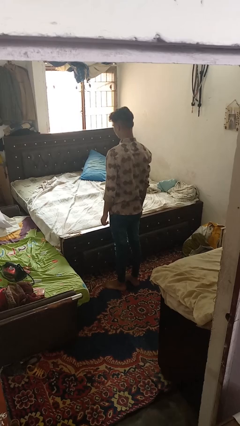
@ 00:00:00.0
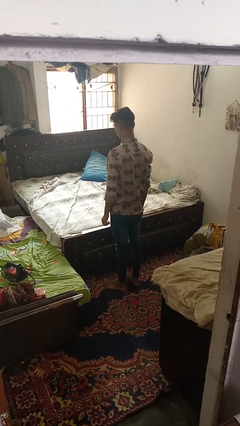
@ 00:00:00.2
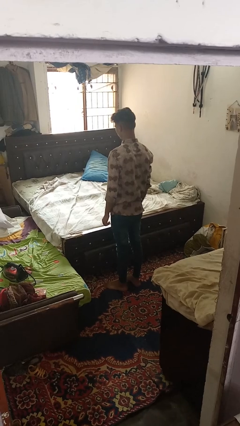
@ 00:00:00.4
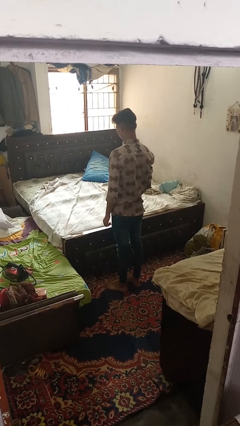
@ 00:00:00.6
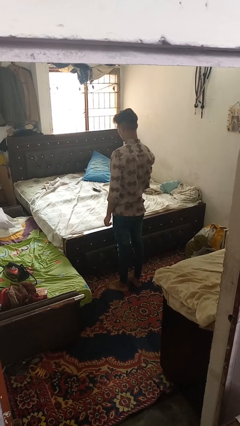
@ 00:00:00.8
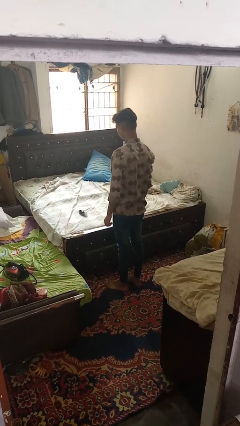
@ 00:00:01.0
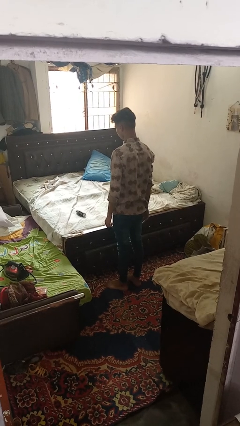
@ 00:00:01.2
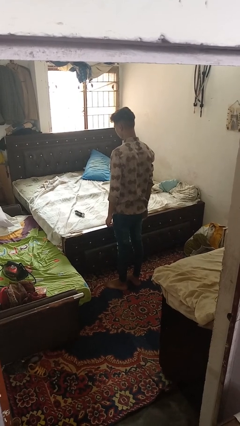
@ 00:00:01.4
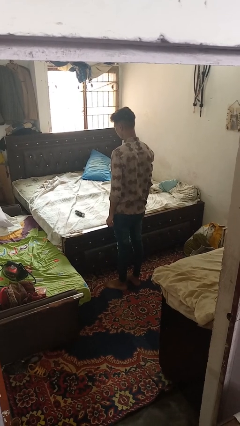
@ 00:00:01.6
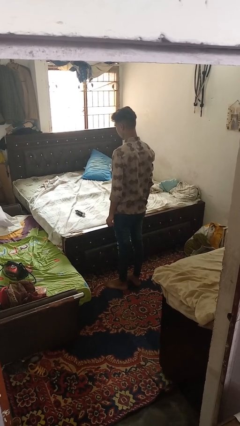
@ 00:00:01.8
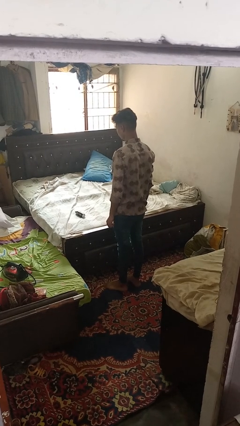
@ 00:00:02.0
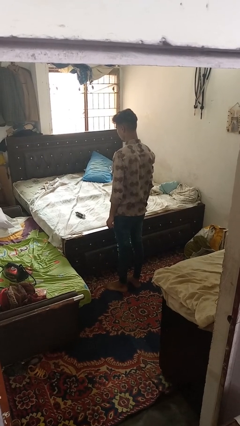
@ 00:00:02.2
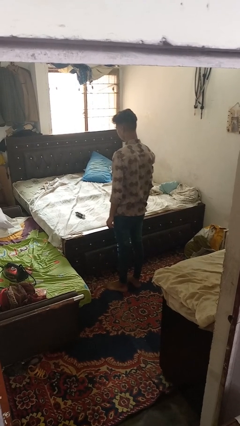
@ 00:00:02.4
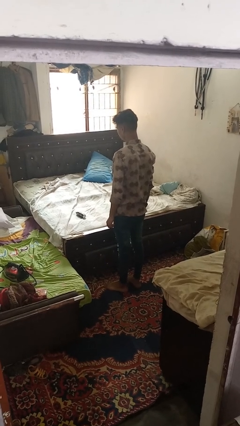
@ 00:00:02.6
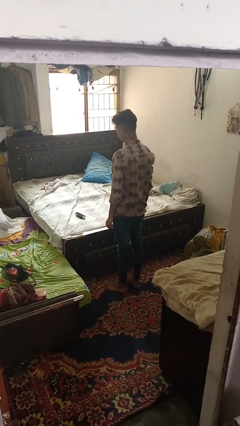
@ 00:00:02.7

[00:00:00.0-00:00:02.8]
person throws object on bed

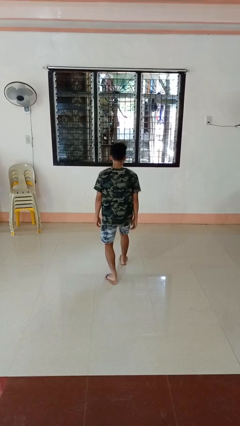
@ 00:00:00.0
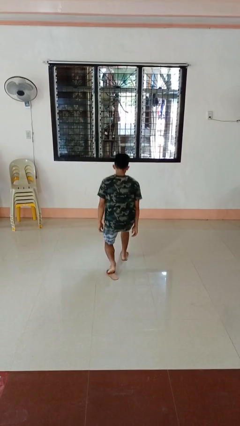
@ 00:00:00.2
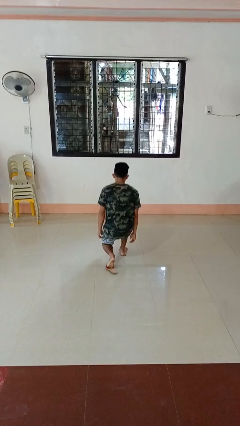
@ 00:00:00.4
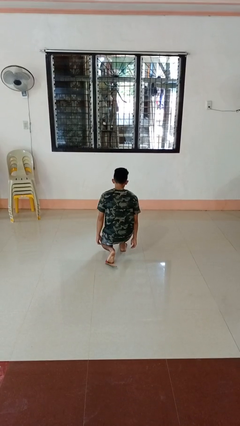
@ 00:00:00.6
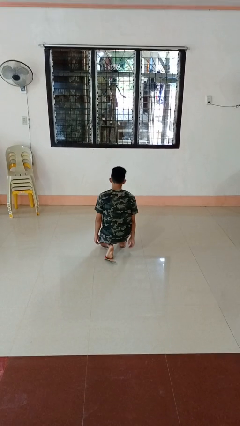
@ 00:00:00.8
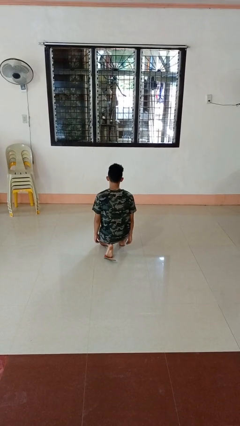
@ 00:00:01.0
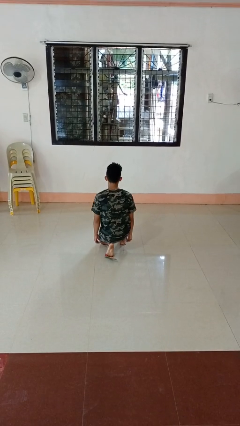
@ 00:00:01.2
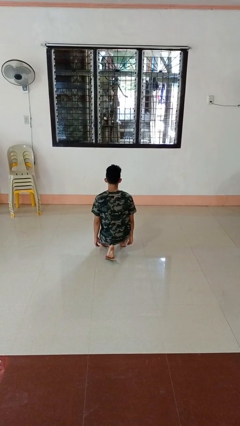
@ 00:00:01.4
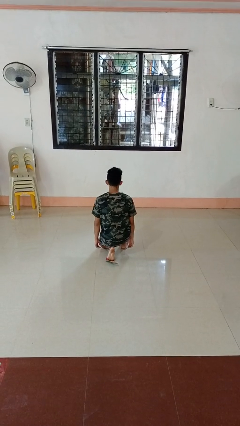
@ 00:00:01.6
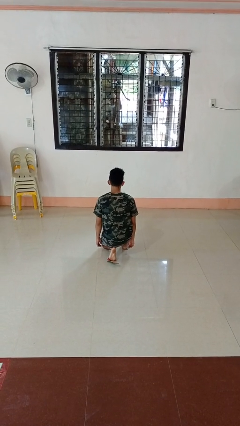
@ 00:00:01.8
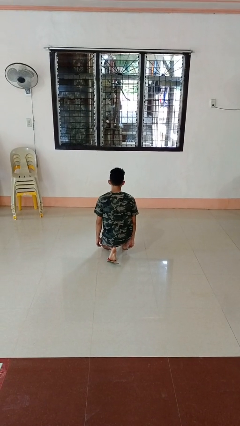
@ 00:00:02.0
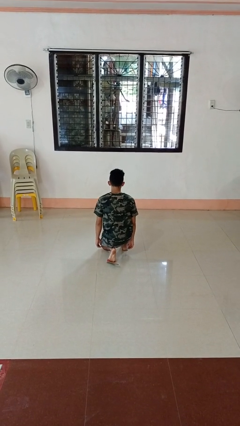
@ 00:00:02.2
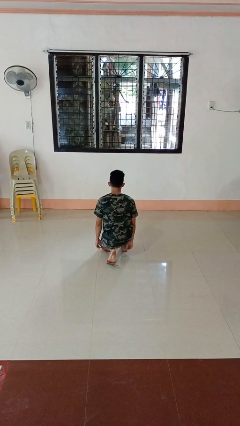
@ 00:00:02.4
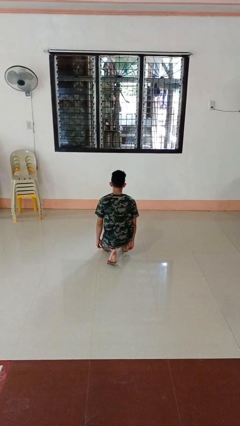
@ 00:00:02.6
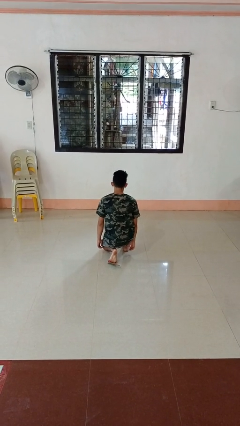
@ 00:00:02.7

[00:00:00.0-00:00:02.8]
person kneels

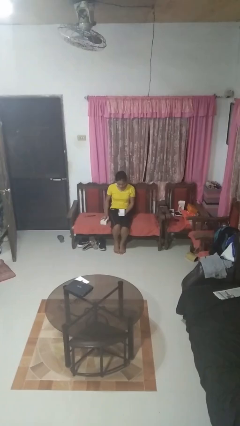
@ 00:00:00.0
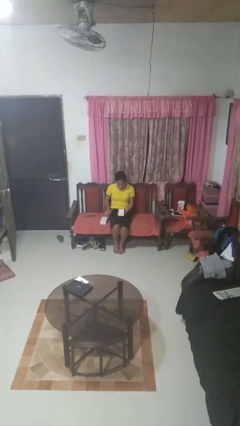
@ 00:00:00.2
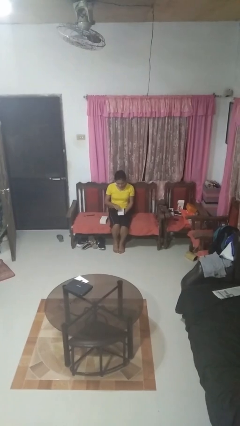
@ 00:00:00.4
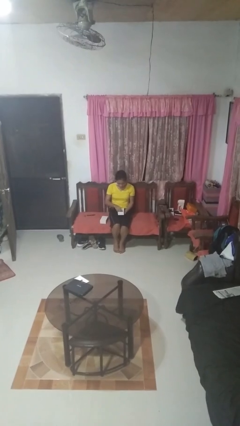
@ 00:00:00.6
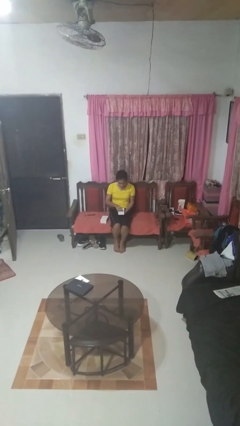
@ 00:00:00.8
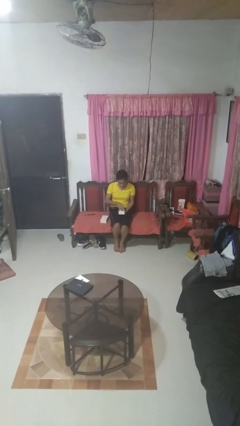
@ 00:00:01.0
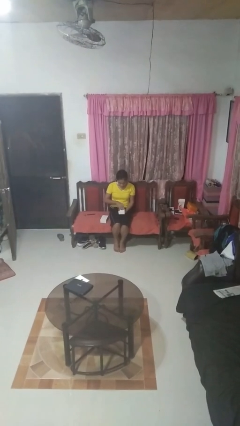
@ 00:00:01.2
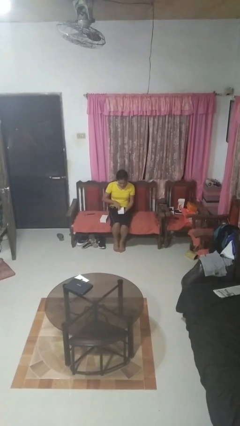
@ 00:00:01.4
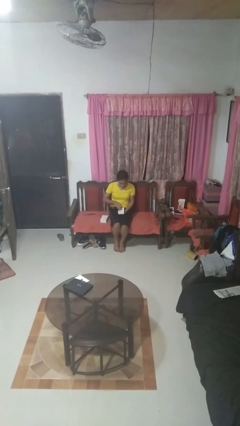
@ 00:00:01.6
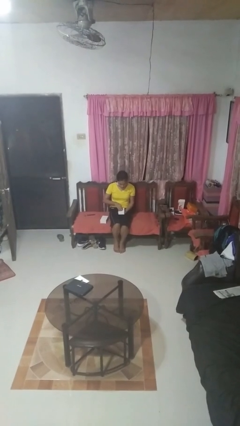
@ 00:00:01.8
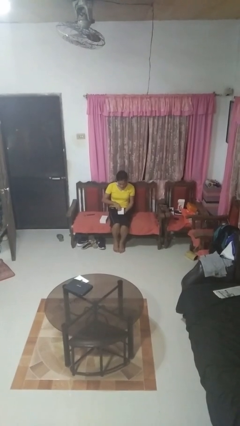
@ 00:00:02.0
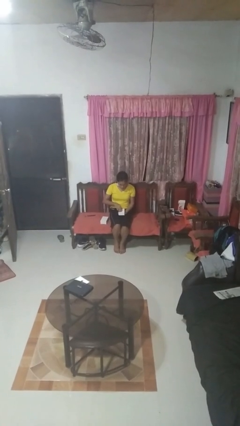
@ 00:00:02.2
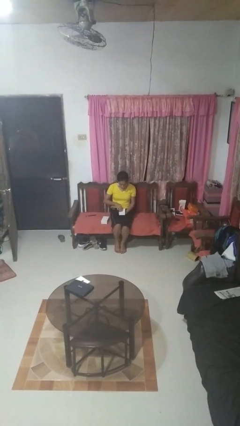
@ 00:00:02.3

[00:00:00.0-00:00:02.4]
person searches jewelry box

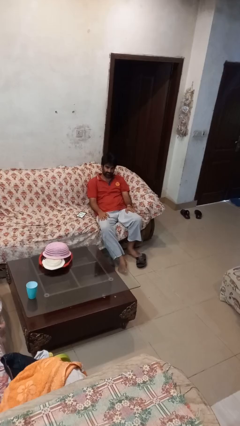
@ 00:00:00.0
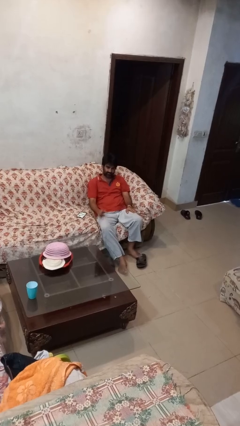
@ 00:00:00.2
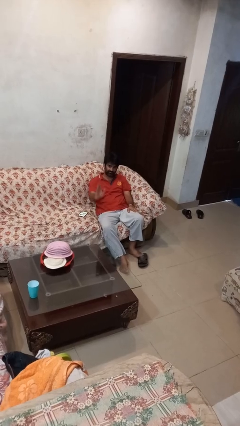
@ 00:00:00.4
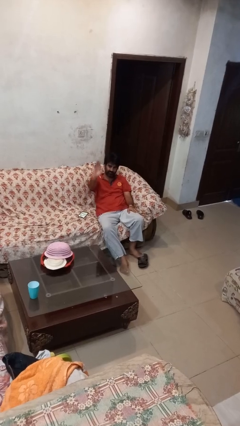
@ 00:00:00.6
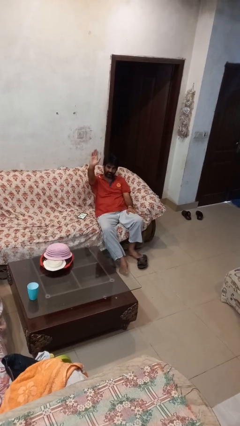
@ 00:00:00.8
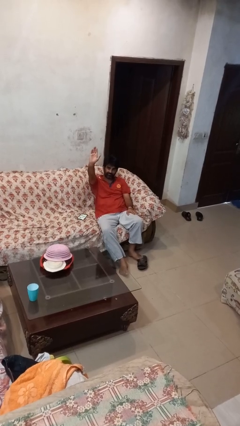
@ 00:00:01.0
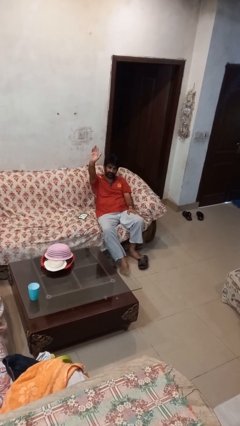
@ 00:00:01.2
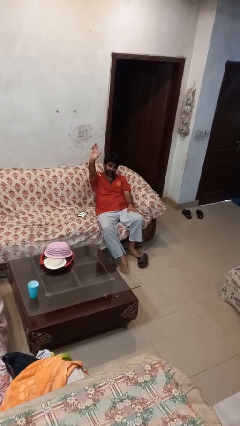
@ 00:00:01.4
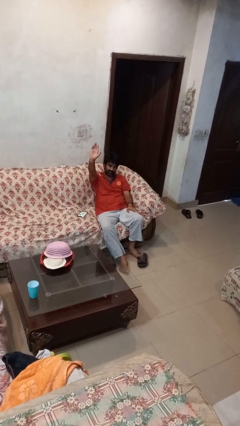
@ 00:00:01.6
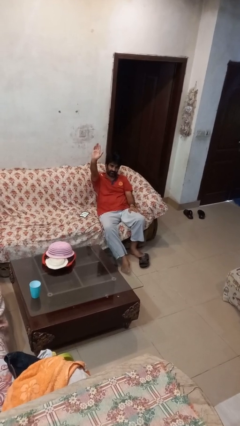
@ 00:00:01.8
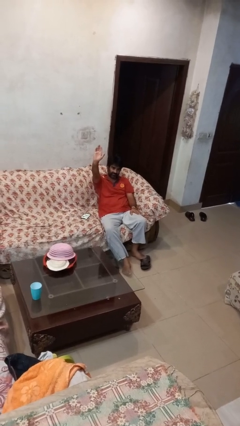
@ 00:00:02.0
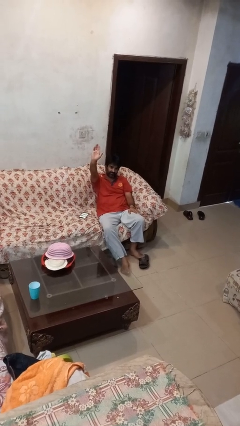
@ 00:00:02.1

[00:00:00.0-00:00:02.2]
person gestures raise hand

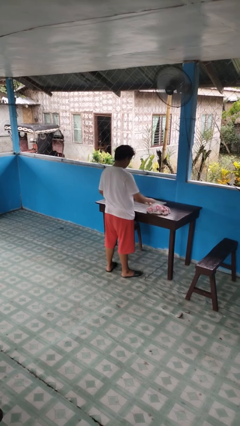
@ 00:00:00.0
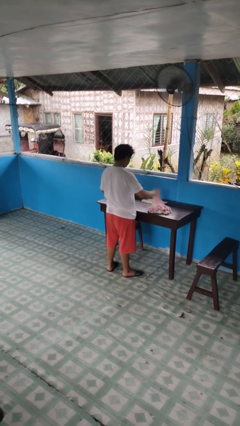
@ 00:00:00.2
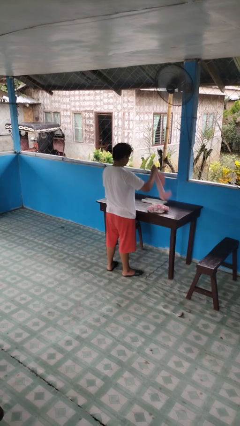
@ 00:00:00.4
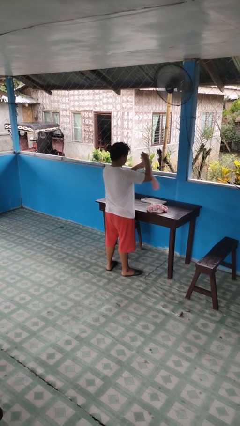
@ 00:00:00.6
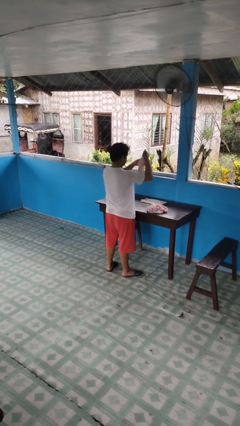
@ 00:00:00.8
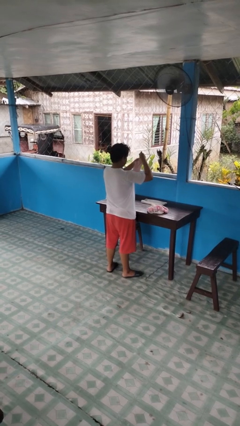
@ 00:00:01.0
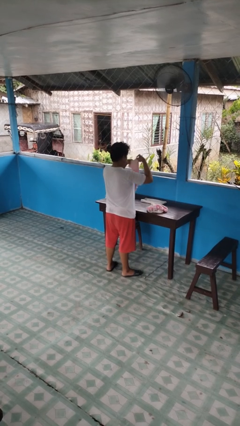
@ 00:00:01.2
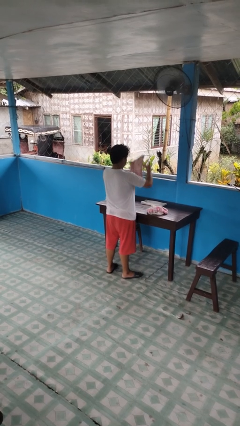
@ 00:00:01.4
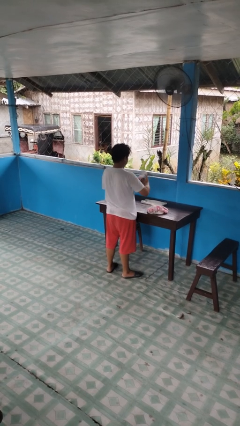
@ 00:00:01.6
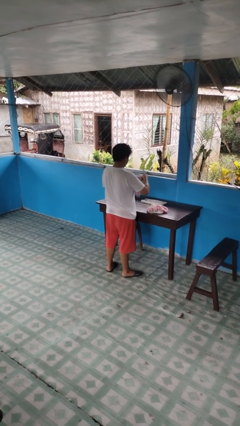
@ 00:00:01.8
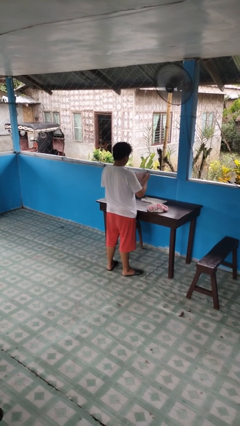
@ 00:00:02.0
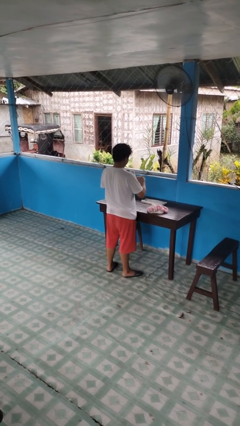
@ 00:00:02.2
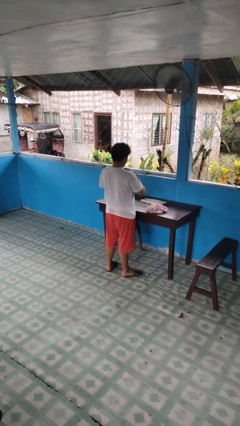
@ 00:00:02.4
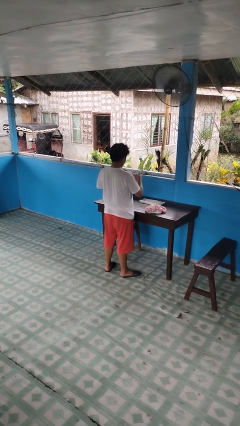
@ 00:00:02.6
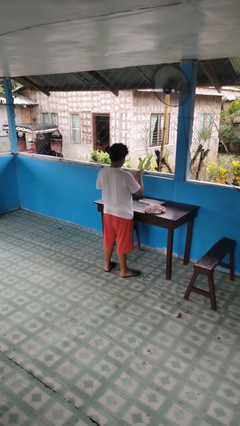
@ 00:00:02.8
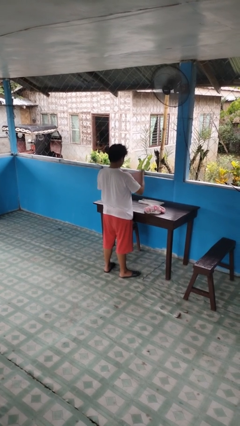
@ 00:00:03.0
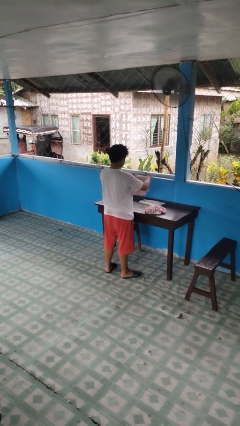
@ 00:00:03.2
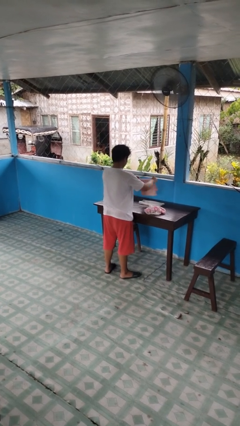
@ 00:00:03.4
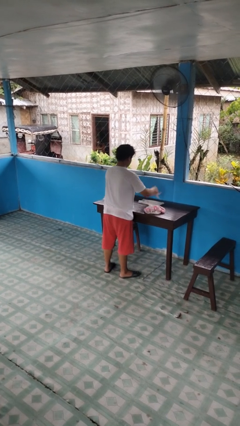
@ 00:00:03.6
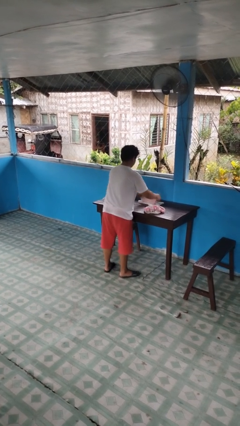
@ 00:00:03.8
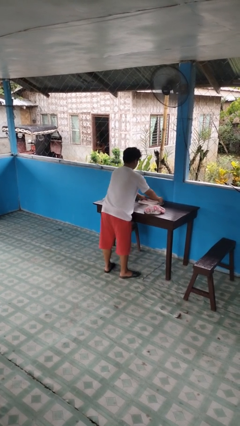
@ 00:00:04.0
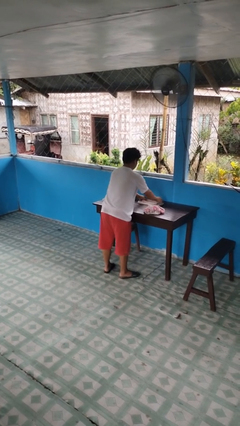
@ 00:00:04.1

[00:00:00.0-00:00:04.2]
person folds towel

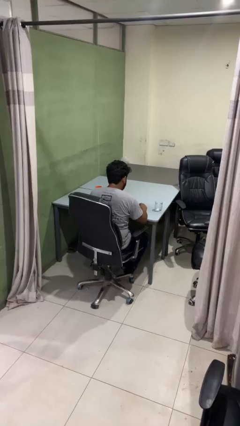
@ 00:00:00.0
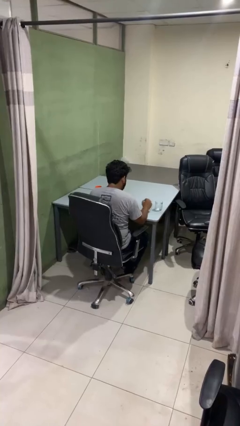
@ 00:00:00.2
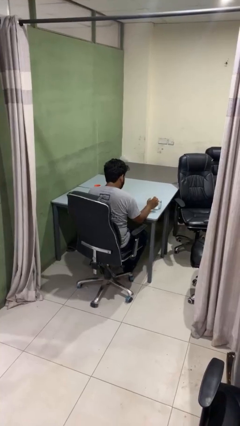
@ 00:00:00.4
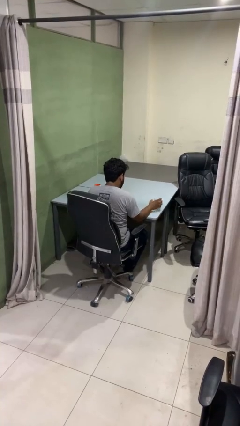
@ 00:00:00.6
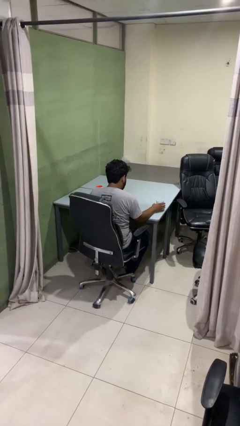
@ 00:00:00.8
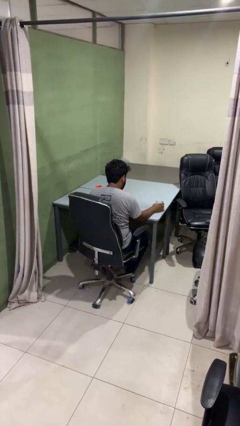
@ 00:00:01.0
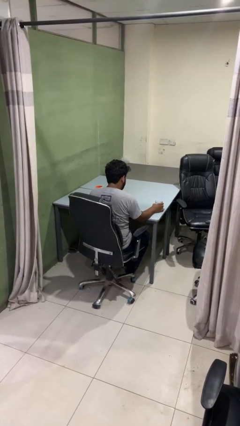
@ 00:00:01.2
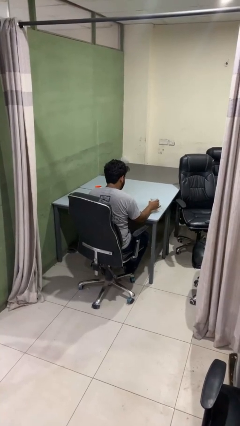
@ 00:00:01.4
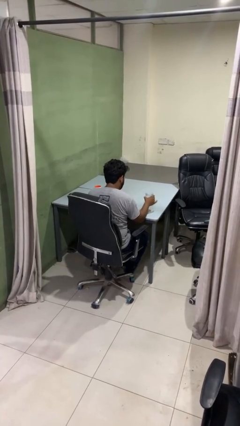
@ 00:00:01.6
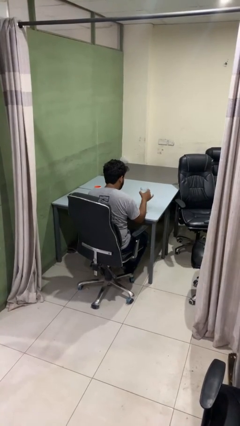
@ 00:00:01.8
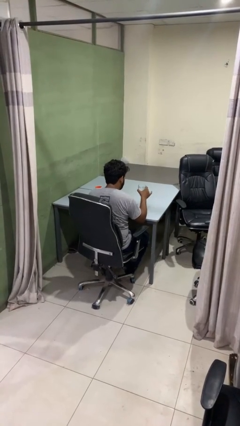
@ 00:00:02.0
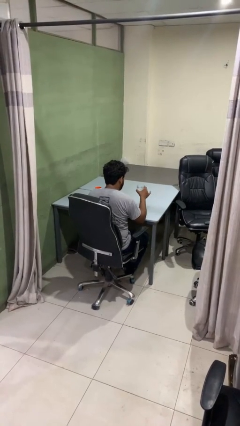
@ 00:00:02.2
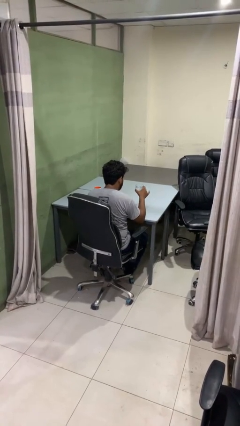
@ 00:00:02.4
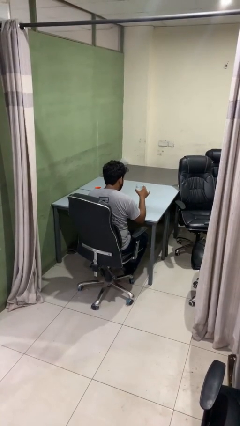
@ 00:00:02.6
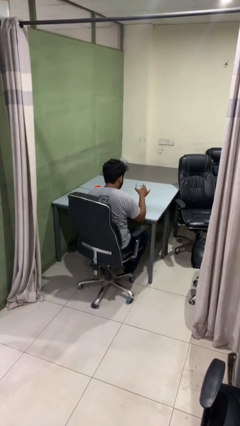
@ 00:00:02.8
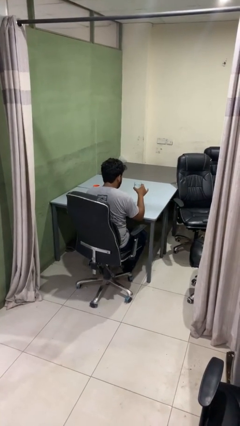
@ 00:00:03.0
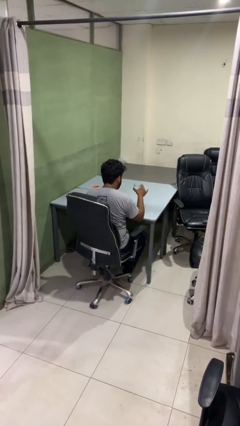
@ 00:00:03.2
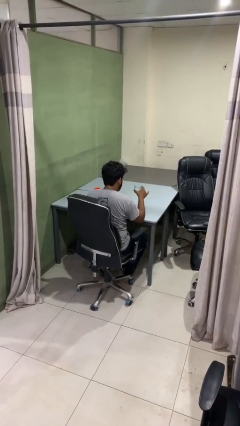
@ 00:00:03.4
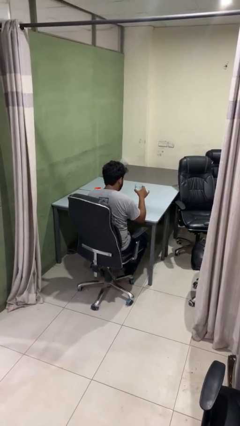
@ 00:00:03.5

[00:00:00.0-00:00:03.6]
person picks up object from table
